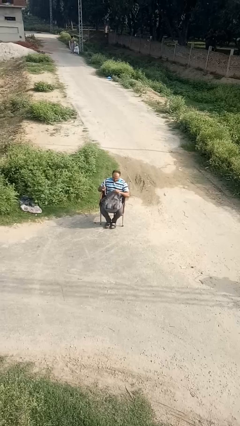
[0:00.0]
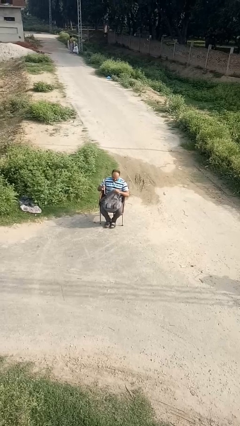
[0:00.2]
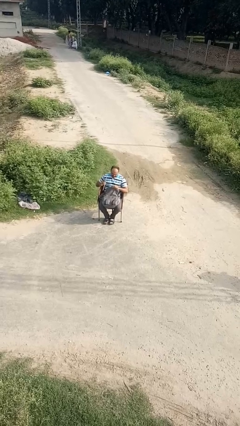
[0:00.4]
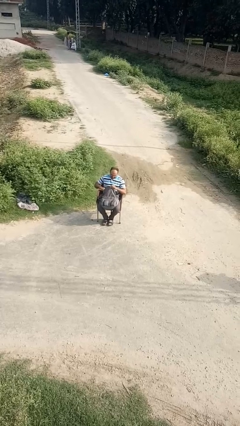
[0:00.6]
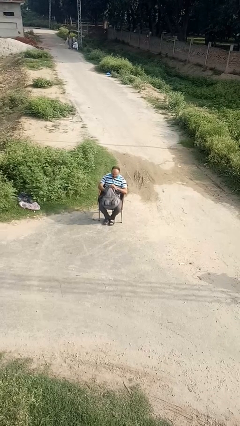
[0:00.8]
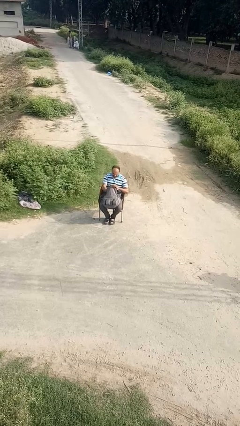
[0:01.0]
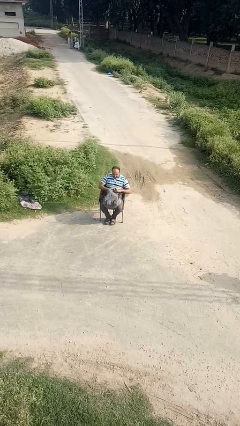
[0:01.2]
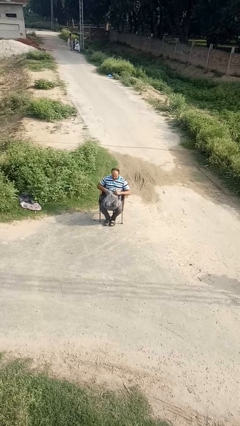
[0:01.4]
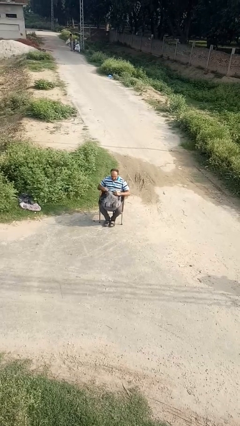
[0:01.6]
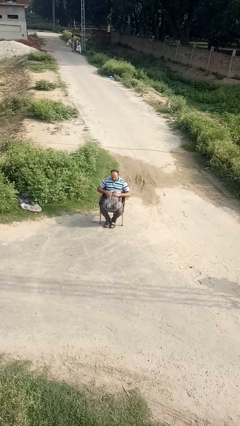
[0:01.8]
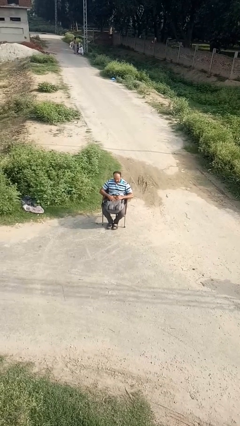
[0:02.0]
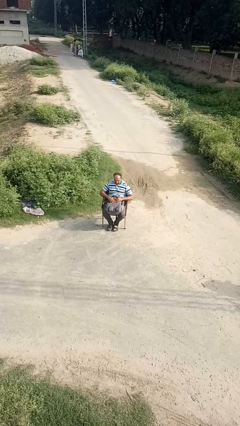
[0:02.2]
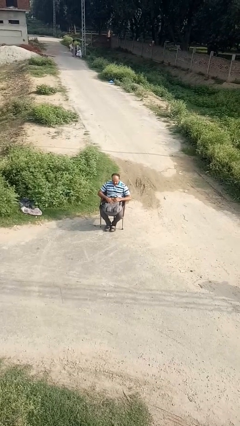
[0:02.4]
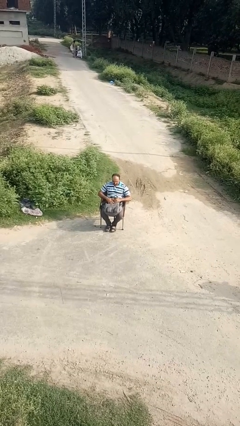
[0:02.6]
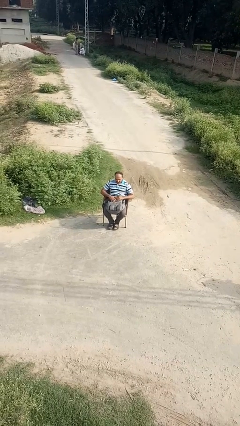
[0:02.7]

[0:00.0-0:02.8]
person puts object into backpack

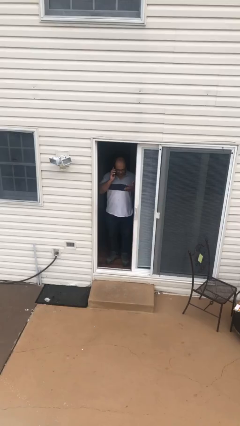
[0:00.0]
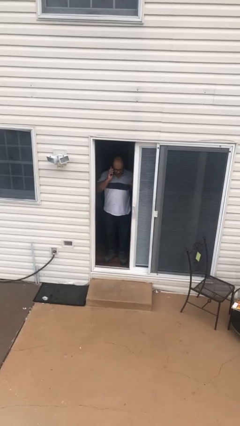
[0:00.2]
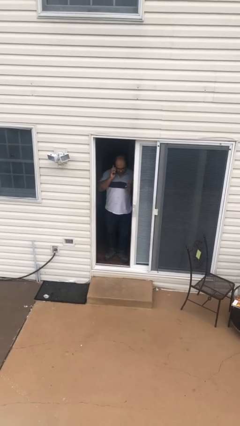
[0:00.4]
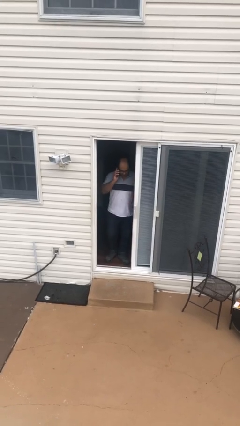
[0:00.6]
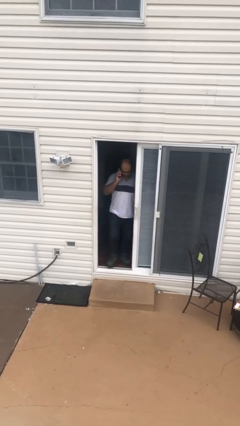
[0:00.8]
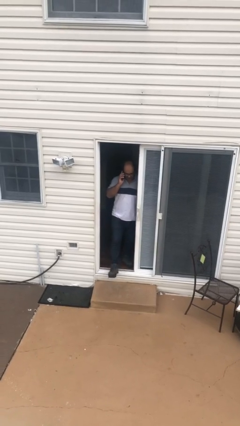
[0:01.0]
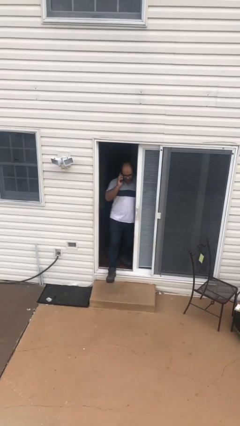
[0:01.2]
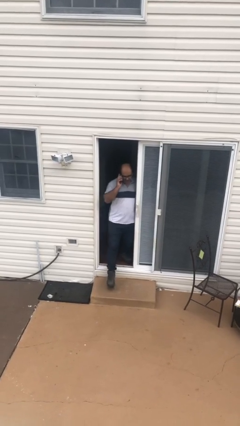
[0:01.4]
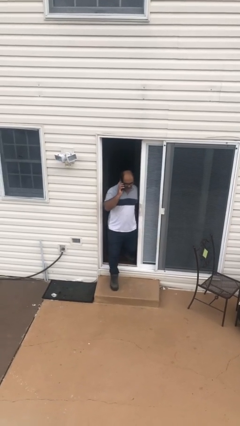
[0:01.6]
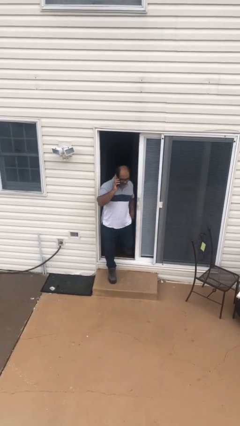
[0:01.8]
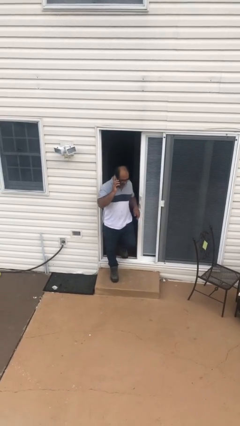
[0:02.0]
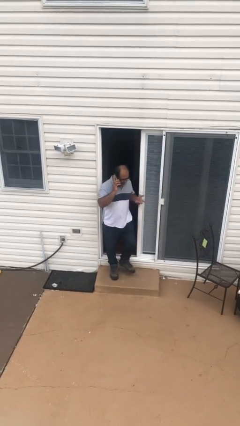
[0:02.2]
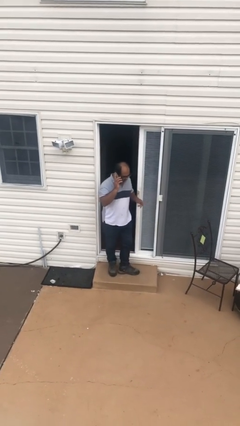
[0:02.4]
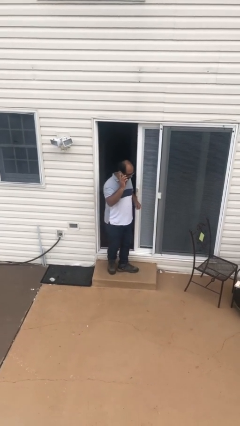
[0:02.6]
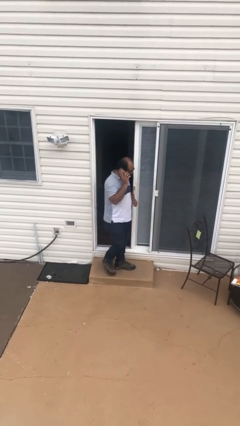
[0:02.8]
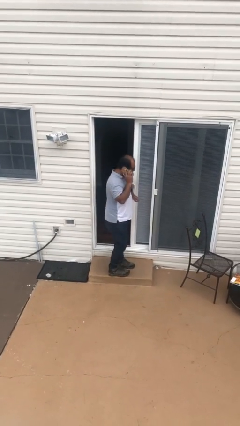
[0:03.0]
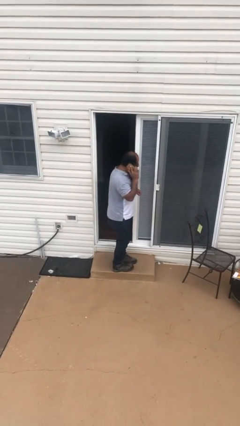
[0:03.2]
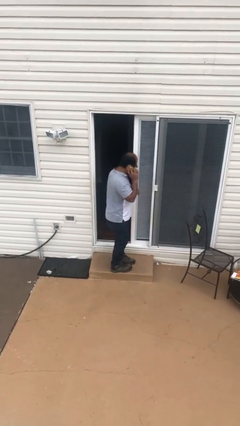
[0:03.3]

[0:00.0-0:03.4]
person enters scene through structure

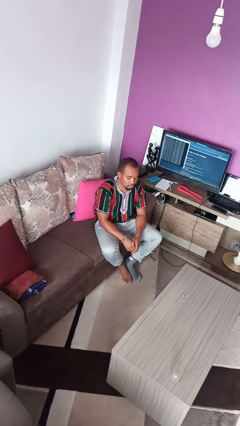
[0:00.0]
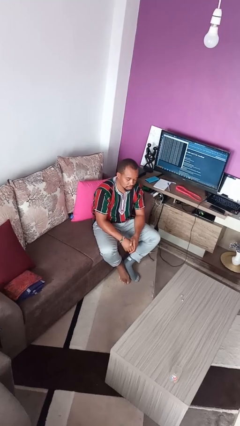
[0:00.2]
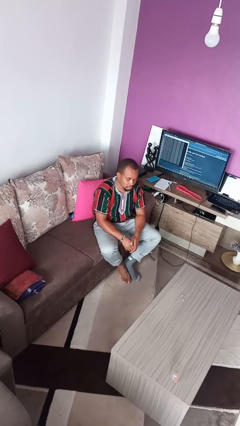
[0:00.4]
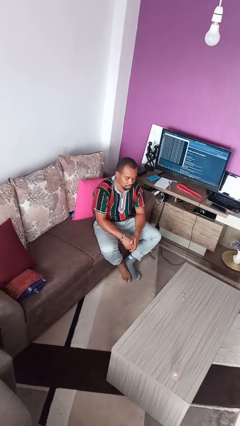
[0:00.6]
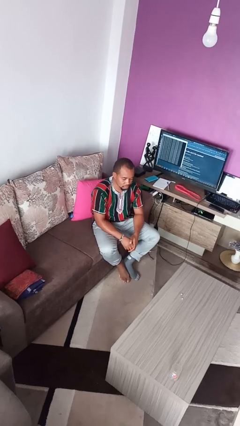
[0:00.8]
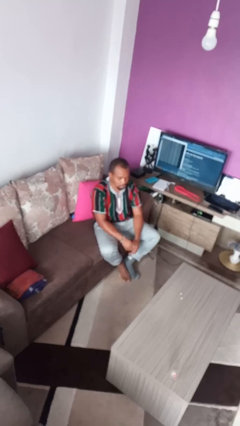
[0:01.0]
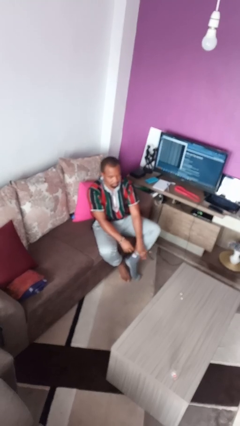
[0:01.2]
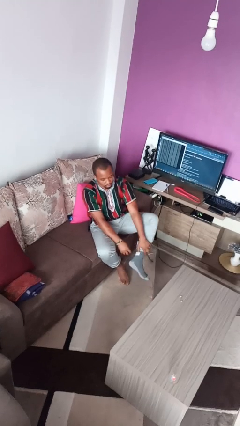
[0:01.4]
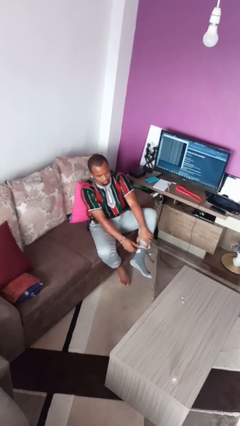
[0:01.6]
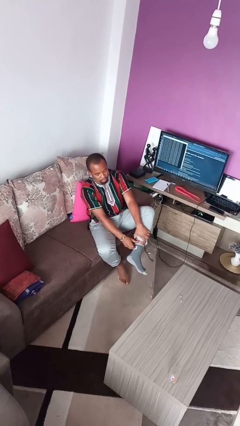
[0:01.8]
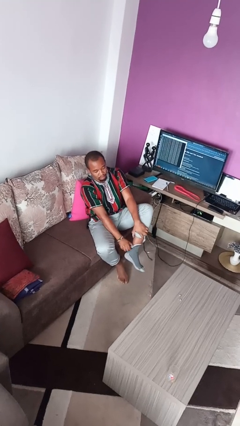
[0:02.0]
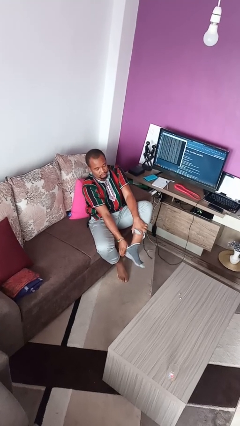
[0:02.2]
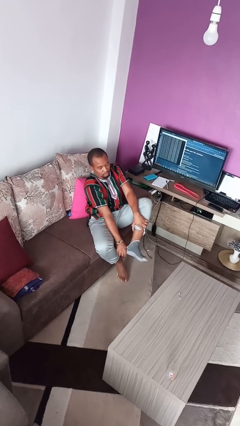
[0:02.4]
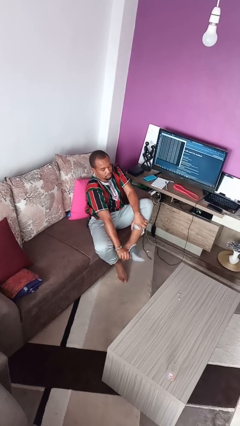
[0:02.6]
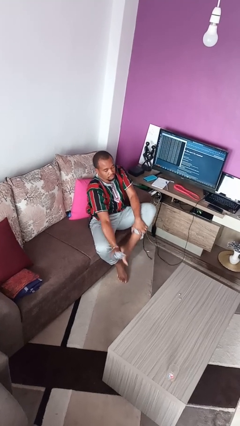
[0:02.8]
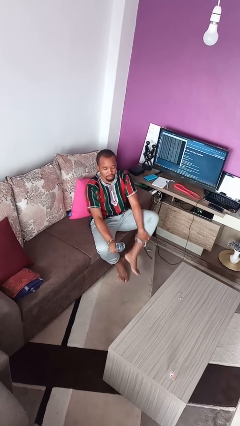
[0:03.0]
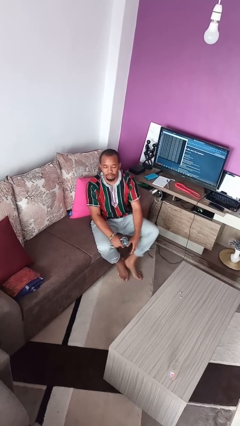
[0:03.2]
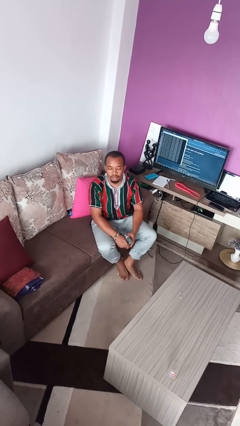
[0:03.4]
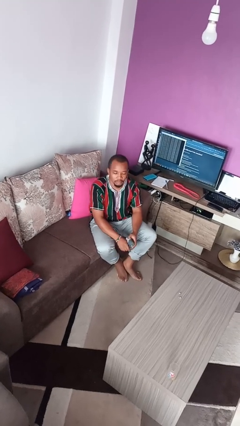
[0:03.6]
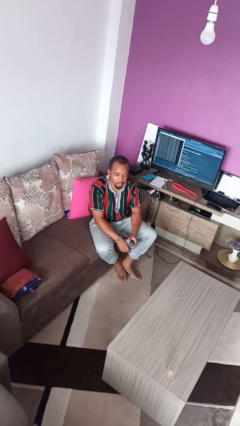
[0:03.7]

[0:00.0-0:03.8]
person takes off socks

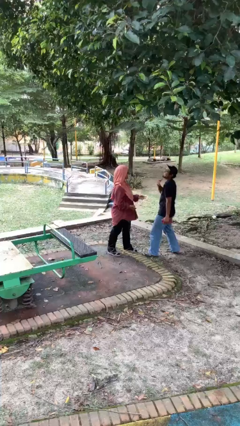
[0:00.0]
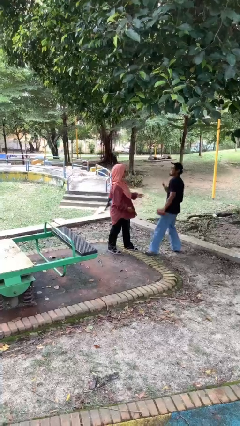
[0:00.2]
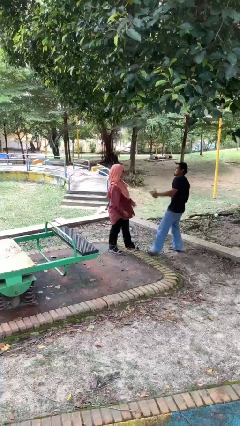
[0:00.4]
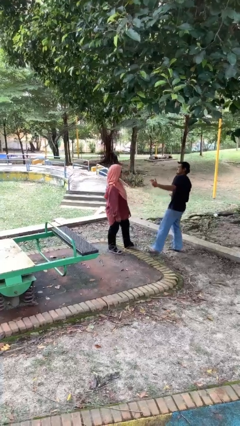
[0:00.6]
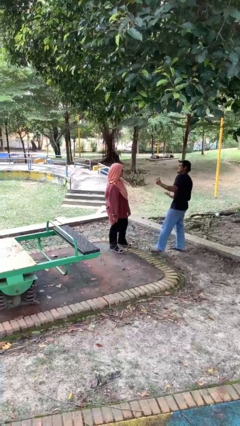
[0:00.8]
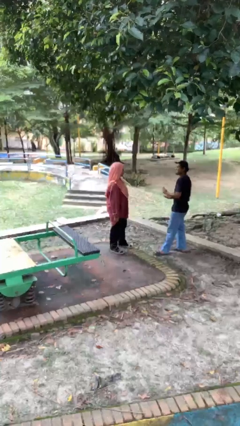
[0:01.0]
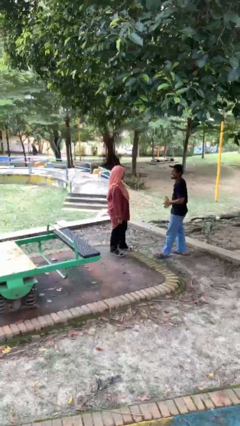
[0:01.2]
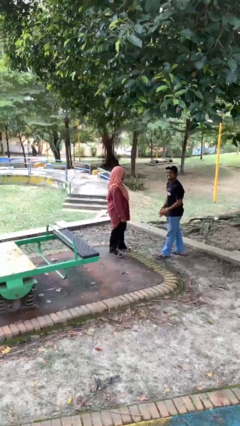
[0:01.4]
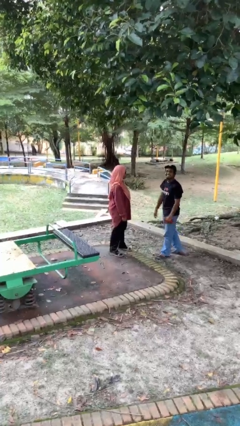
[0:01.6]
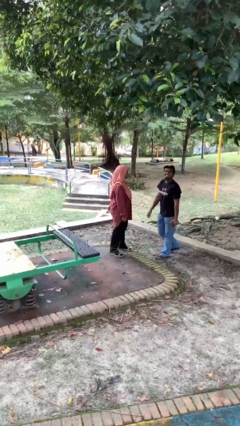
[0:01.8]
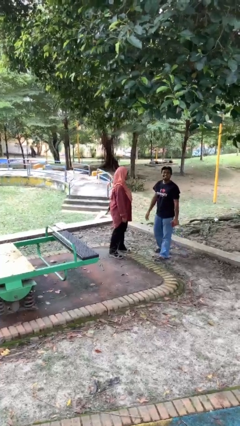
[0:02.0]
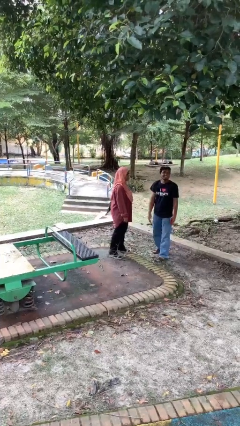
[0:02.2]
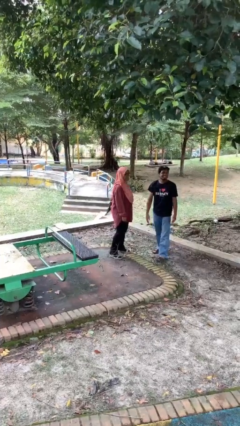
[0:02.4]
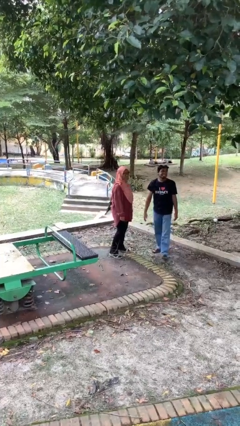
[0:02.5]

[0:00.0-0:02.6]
person talks to person

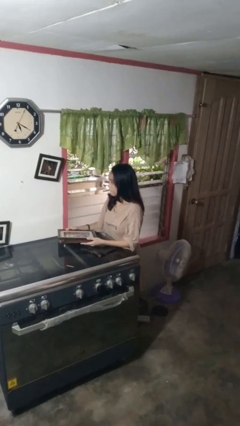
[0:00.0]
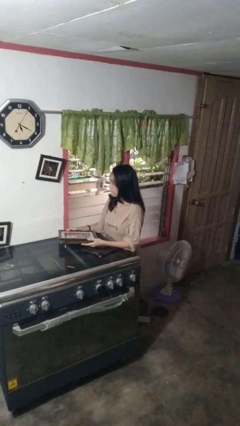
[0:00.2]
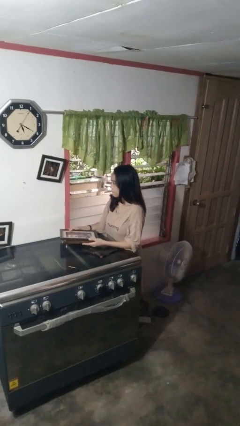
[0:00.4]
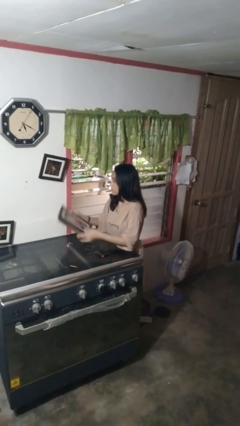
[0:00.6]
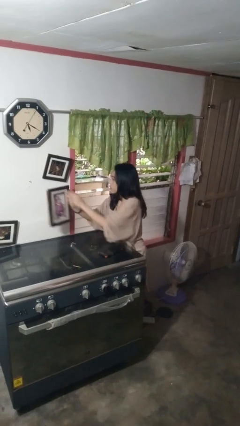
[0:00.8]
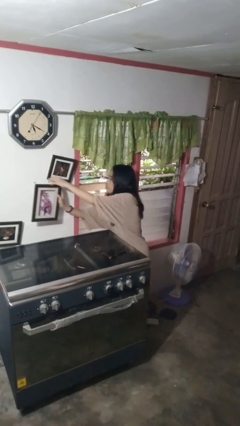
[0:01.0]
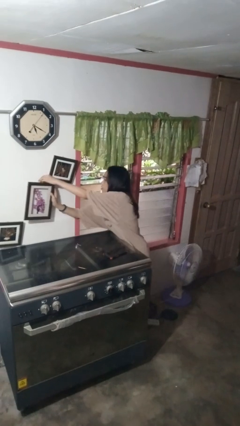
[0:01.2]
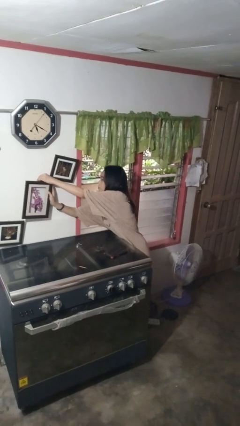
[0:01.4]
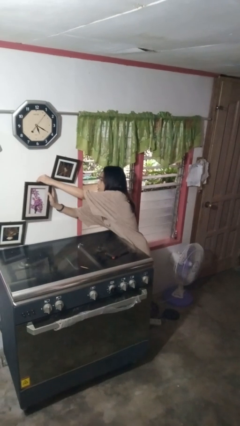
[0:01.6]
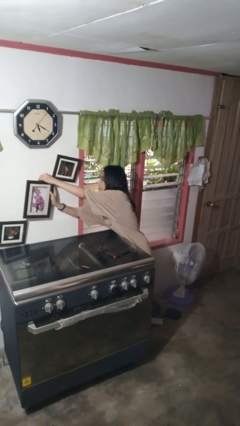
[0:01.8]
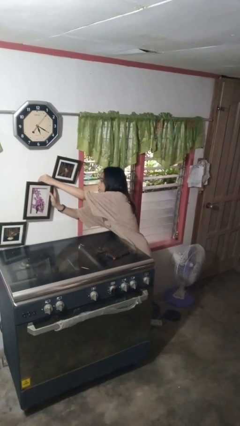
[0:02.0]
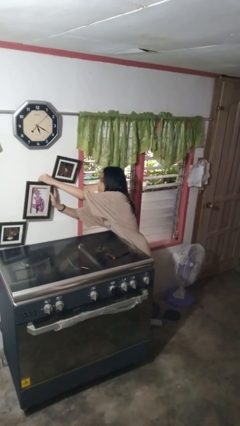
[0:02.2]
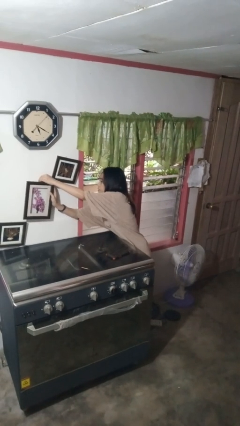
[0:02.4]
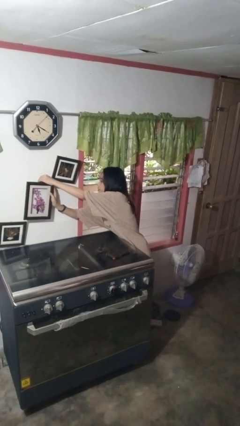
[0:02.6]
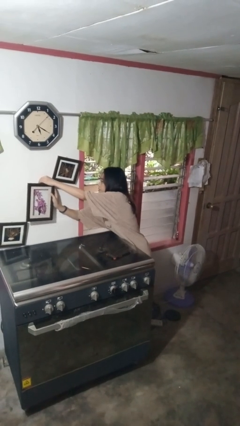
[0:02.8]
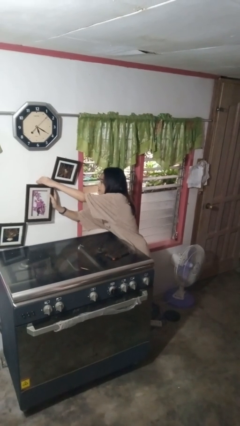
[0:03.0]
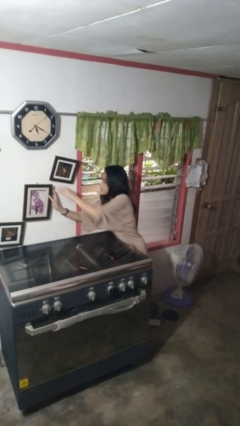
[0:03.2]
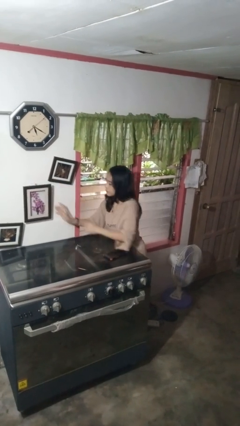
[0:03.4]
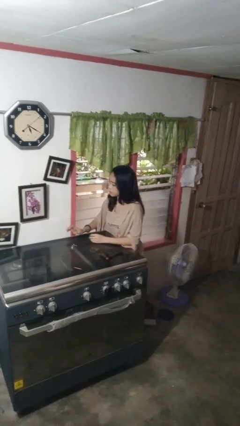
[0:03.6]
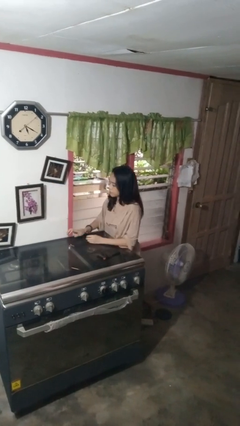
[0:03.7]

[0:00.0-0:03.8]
person puts up picture frame

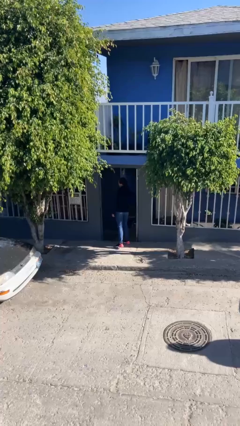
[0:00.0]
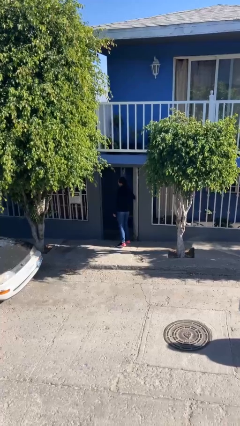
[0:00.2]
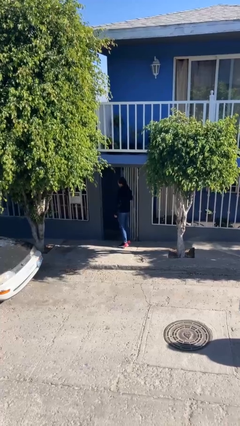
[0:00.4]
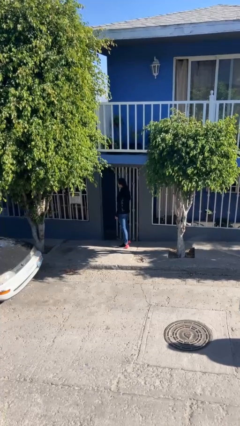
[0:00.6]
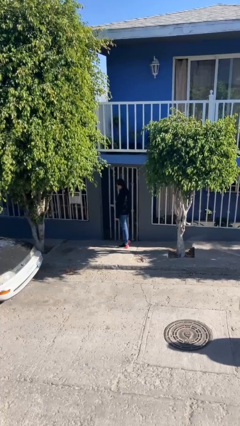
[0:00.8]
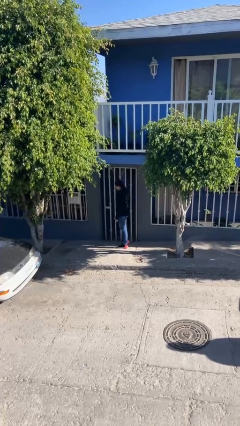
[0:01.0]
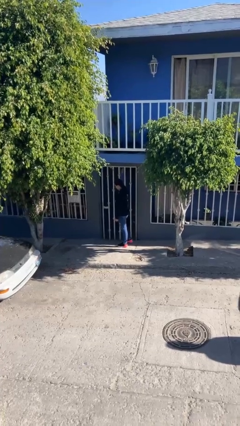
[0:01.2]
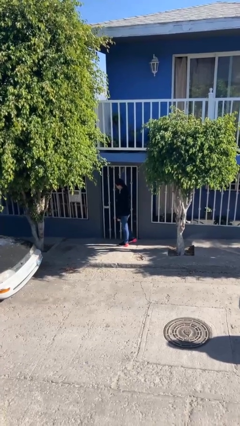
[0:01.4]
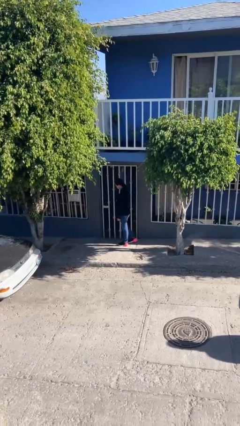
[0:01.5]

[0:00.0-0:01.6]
person closes facility door
